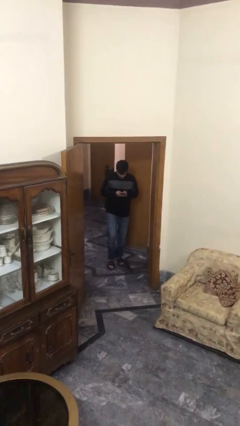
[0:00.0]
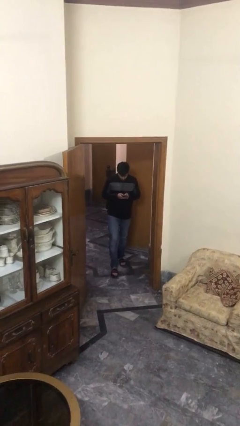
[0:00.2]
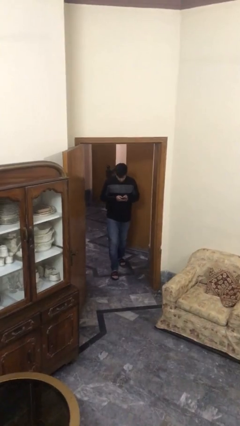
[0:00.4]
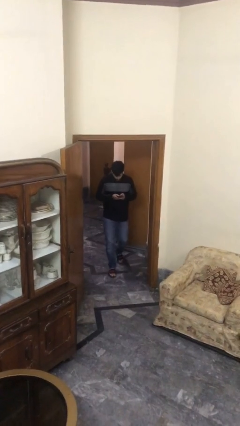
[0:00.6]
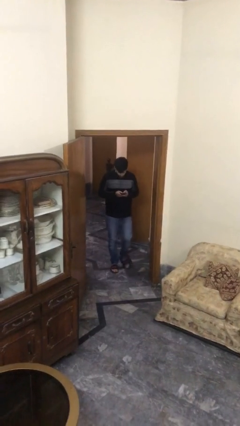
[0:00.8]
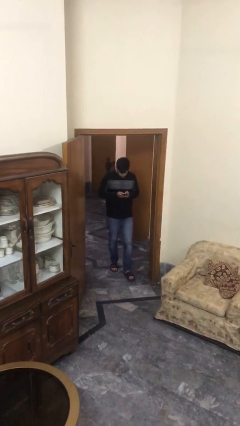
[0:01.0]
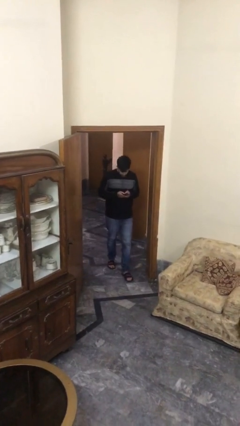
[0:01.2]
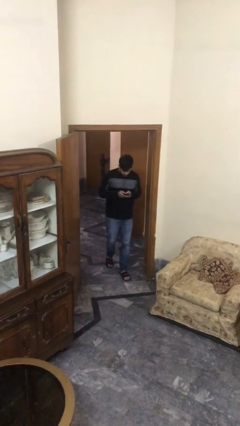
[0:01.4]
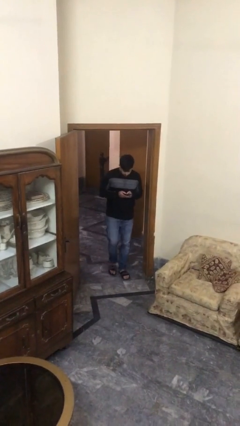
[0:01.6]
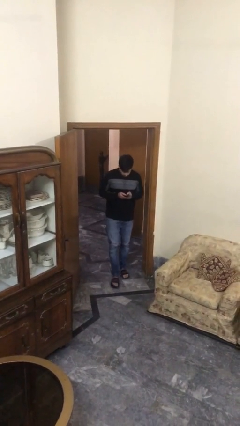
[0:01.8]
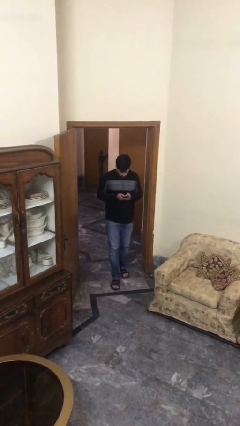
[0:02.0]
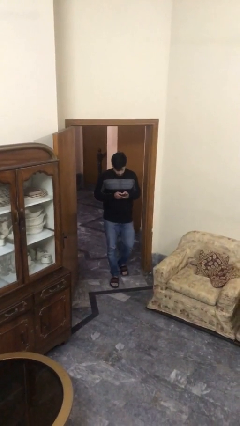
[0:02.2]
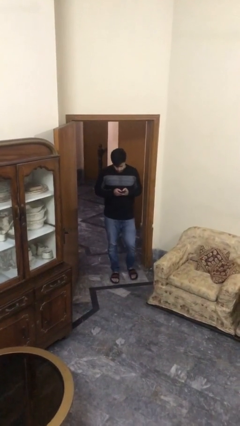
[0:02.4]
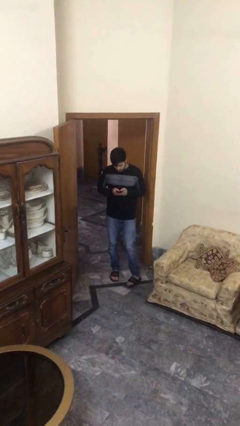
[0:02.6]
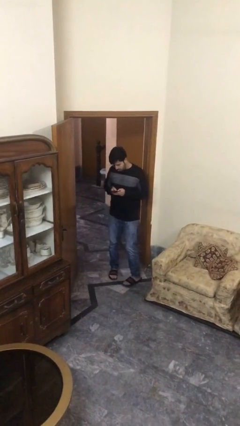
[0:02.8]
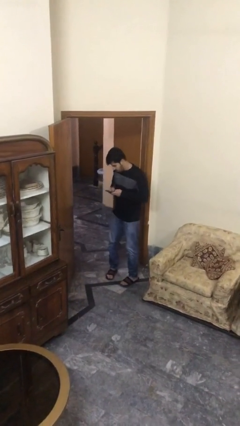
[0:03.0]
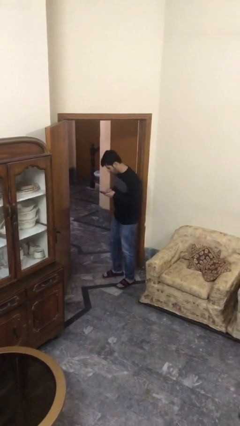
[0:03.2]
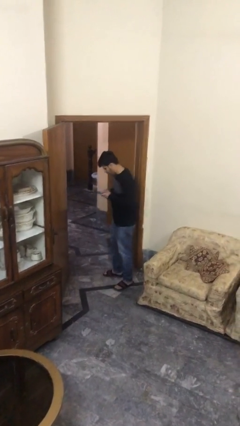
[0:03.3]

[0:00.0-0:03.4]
person enters scene through structure

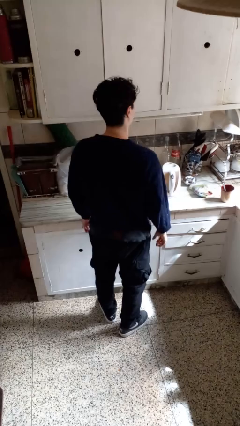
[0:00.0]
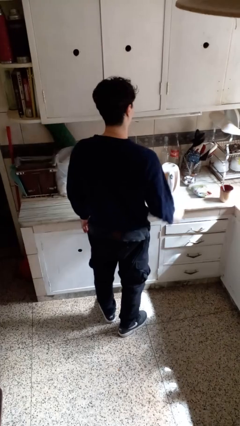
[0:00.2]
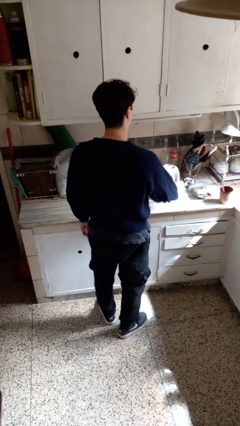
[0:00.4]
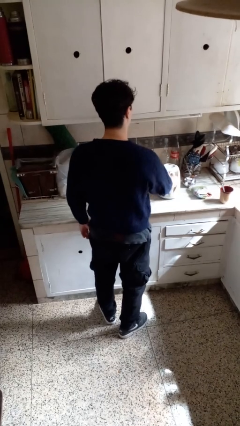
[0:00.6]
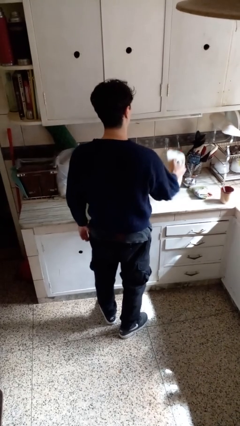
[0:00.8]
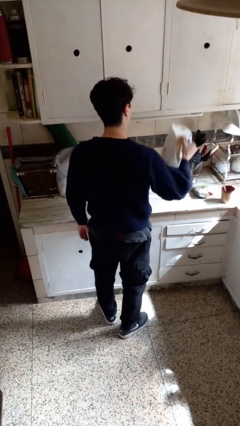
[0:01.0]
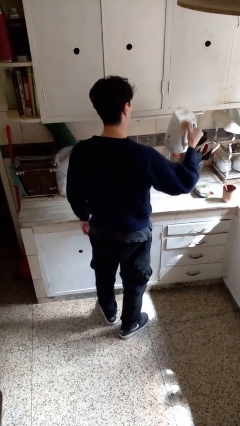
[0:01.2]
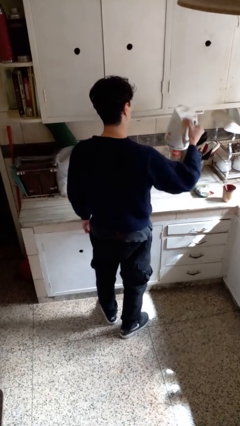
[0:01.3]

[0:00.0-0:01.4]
person picks up object from countertop

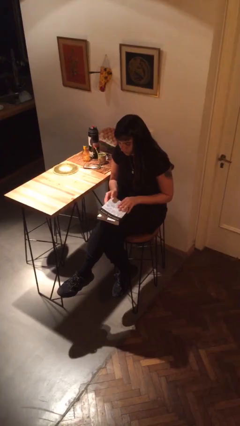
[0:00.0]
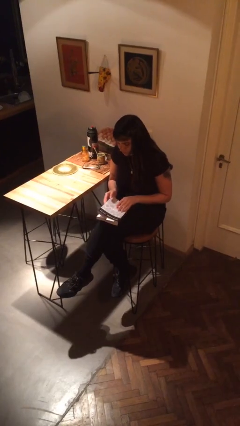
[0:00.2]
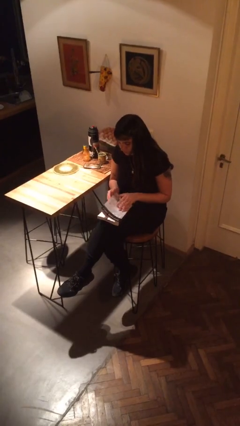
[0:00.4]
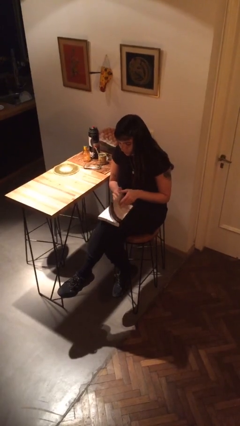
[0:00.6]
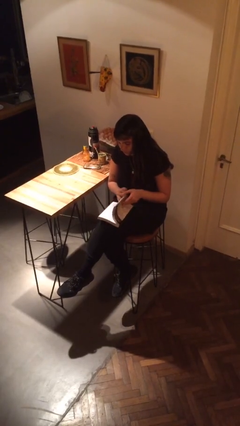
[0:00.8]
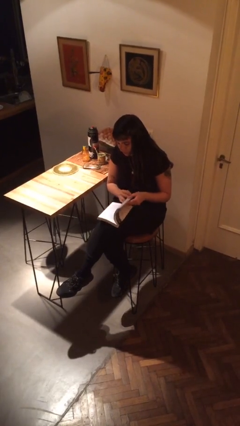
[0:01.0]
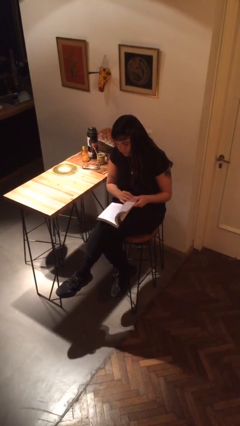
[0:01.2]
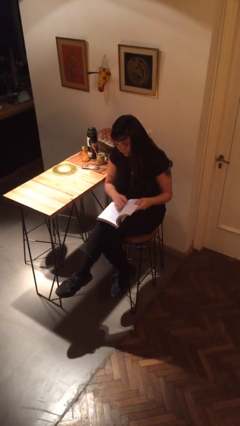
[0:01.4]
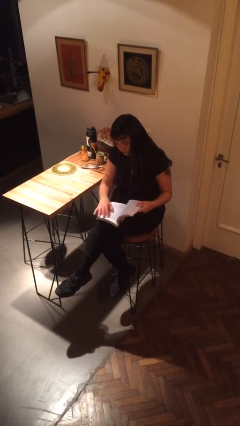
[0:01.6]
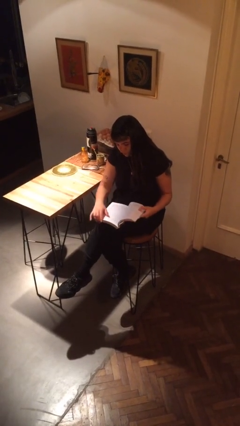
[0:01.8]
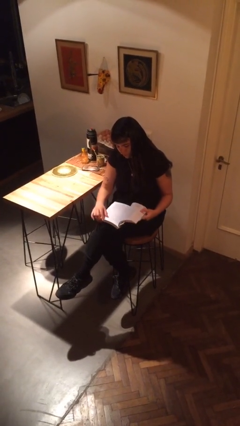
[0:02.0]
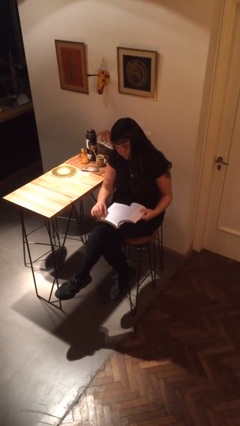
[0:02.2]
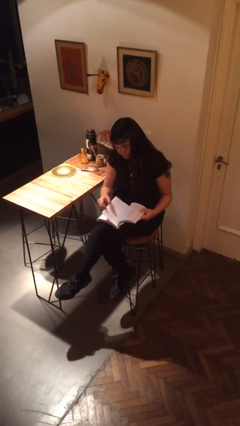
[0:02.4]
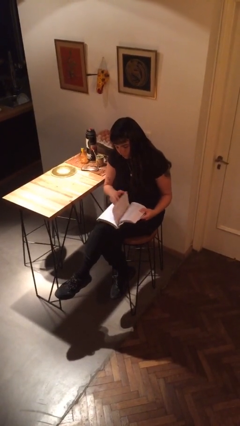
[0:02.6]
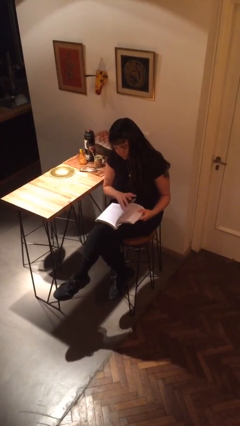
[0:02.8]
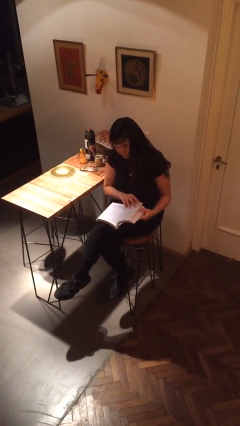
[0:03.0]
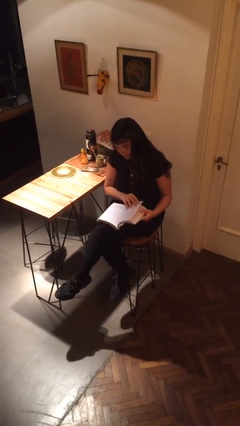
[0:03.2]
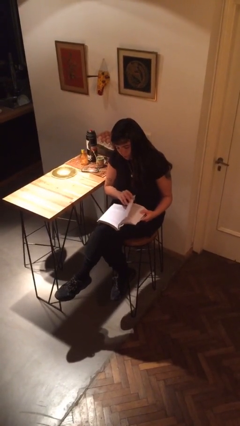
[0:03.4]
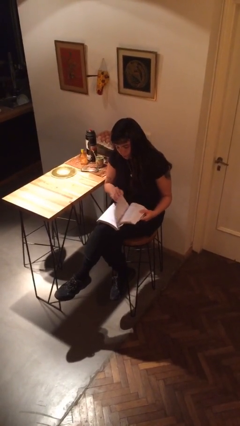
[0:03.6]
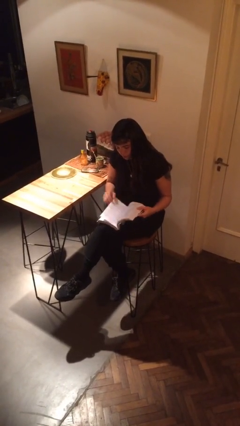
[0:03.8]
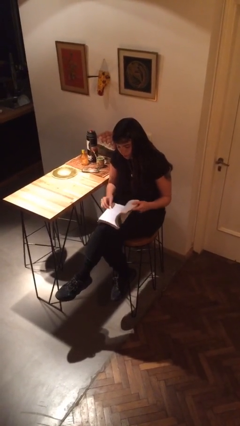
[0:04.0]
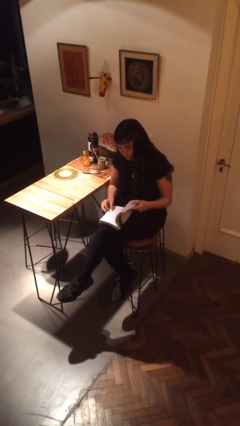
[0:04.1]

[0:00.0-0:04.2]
person reads book

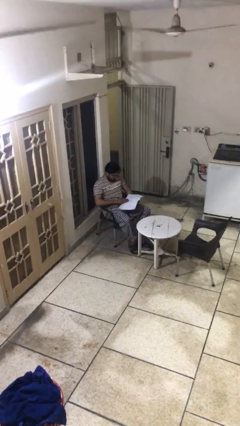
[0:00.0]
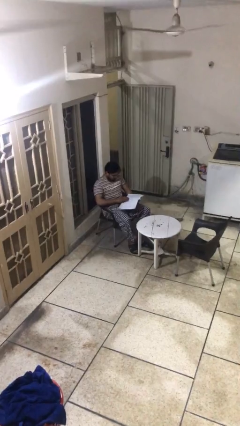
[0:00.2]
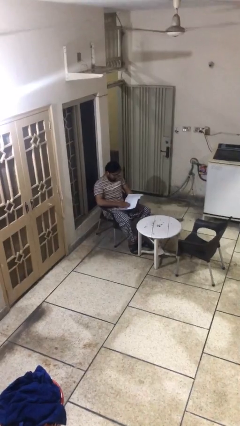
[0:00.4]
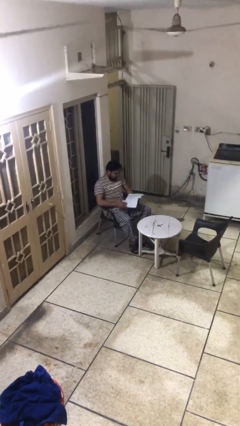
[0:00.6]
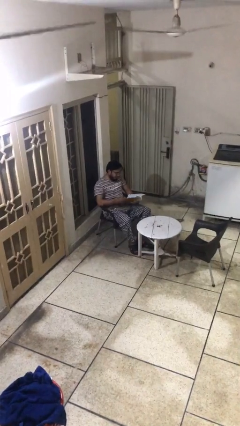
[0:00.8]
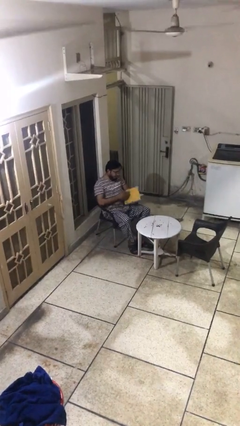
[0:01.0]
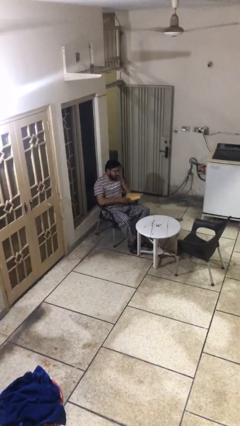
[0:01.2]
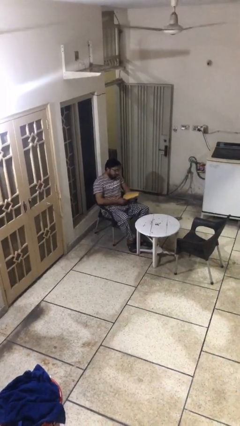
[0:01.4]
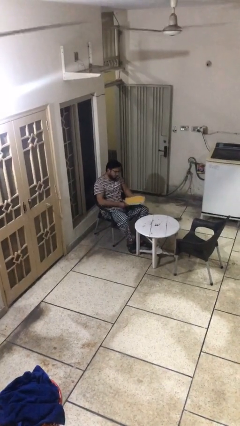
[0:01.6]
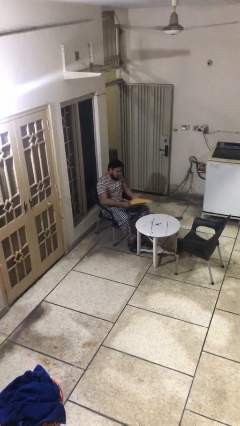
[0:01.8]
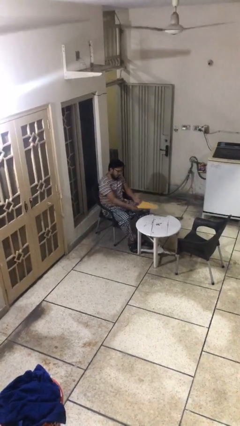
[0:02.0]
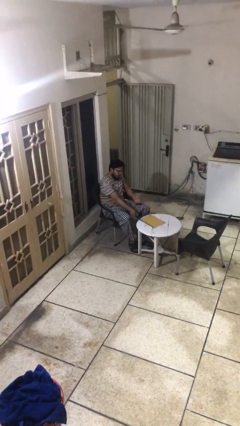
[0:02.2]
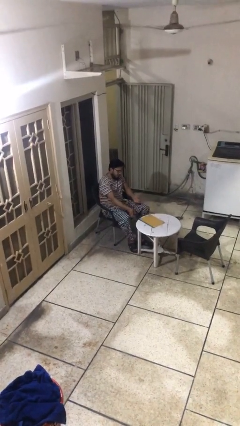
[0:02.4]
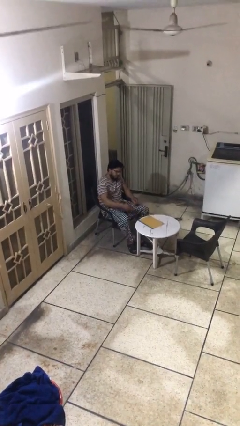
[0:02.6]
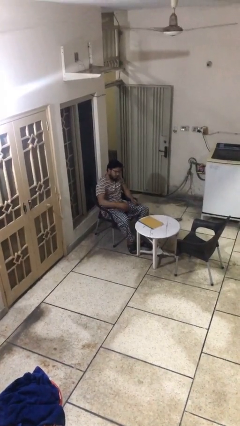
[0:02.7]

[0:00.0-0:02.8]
person puts down object on table

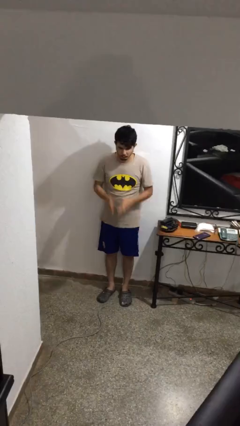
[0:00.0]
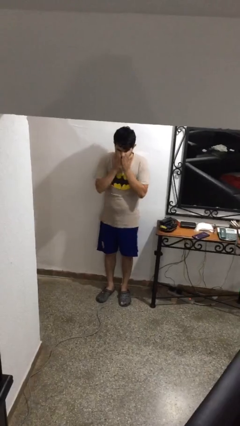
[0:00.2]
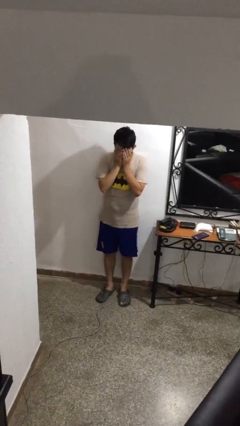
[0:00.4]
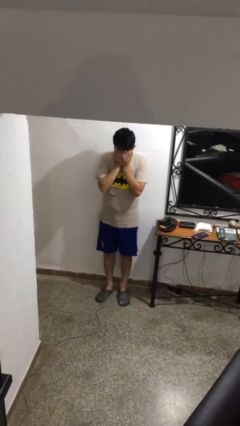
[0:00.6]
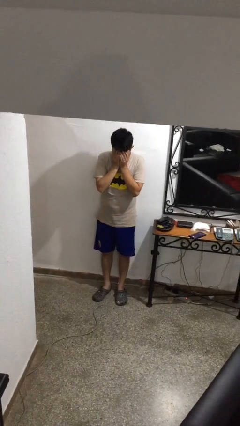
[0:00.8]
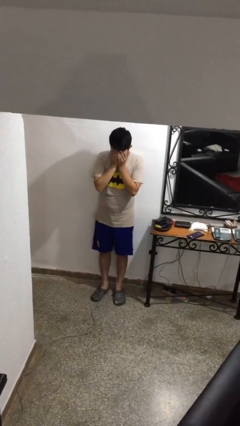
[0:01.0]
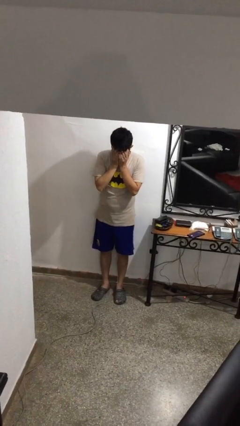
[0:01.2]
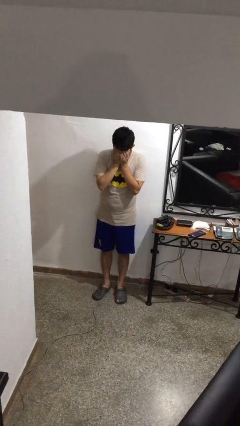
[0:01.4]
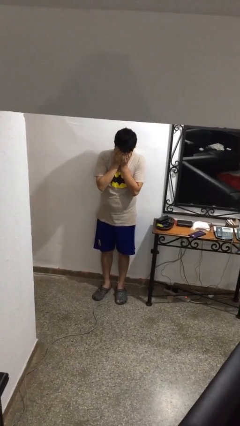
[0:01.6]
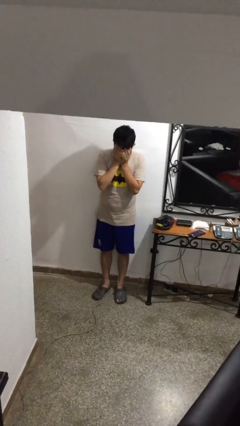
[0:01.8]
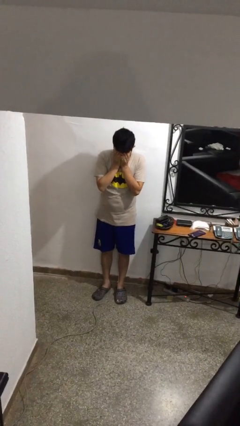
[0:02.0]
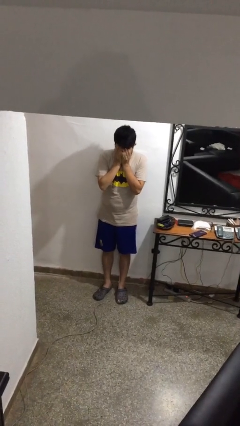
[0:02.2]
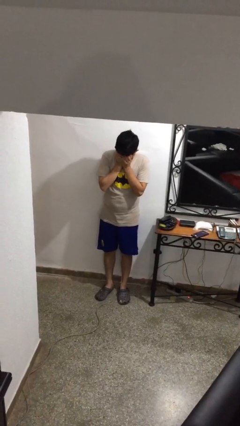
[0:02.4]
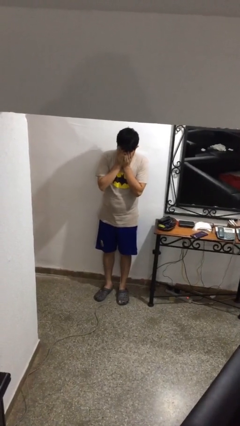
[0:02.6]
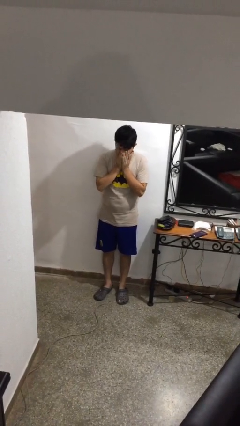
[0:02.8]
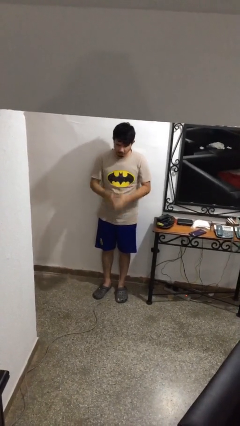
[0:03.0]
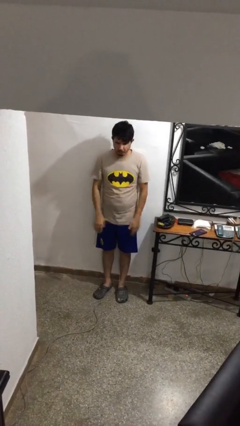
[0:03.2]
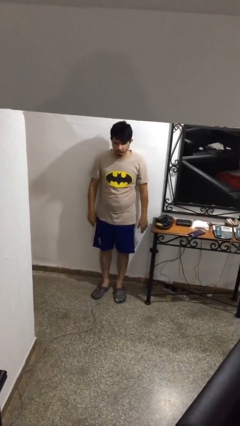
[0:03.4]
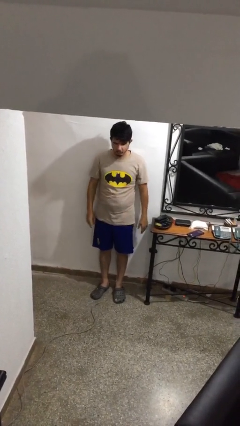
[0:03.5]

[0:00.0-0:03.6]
person covers face with hands

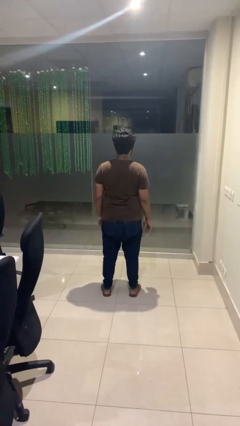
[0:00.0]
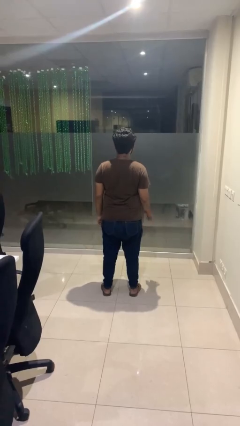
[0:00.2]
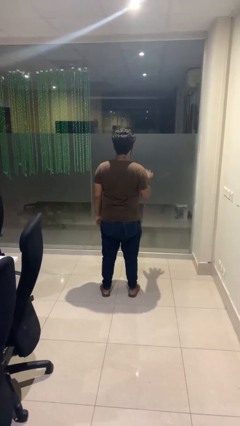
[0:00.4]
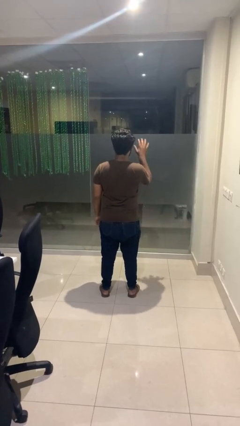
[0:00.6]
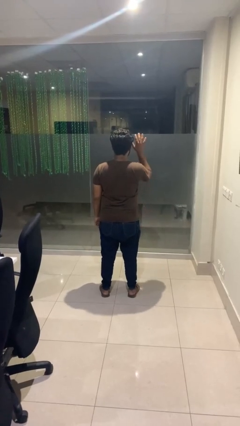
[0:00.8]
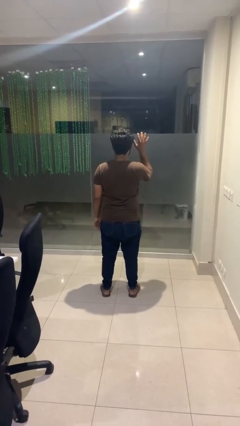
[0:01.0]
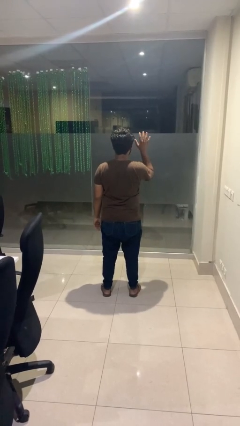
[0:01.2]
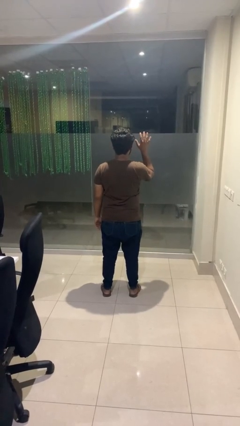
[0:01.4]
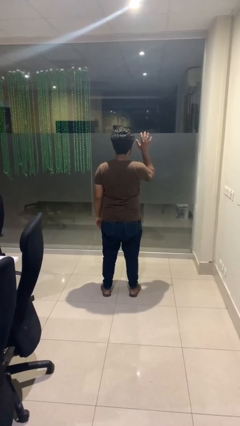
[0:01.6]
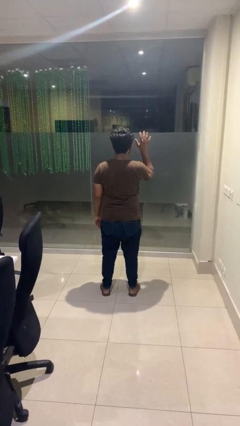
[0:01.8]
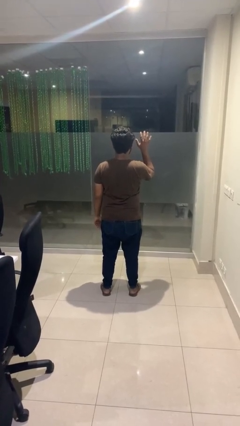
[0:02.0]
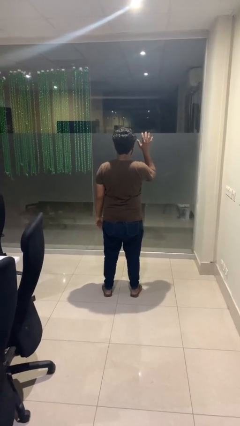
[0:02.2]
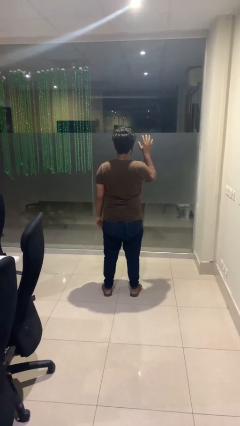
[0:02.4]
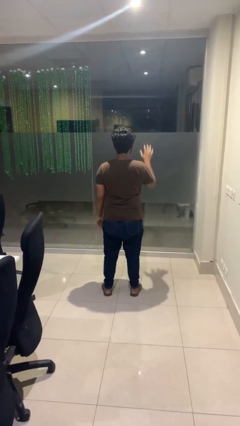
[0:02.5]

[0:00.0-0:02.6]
person gestures number five
